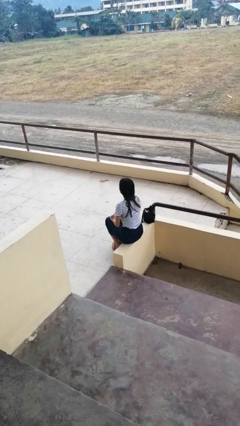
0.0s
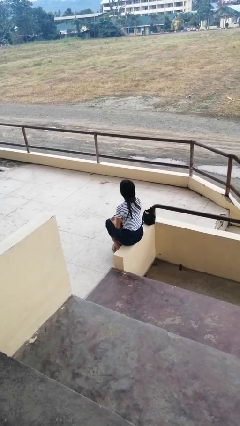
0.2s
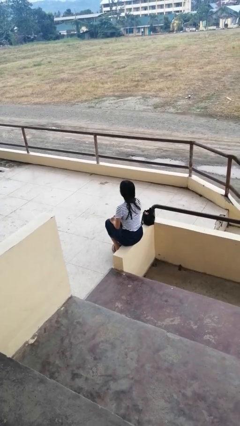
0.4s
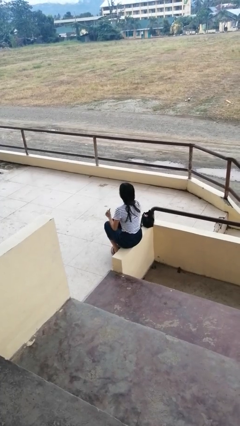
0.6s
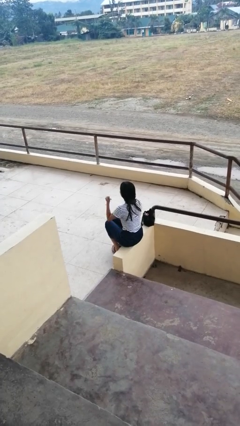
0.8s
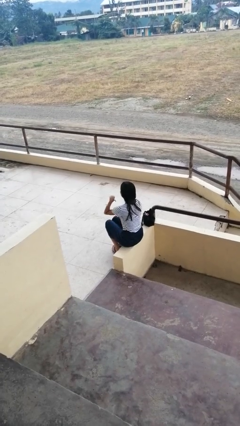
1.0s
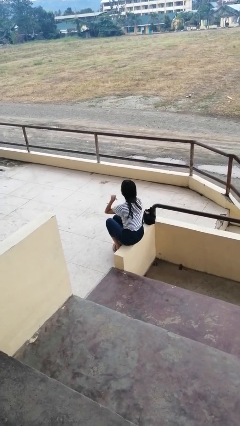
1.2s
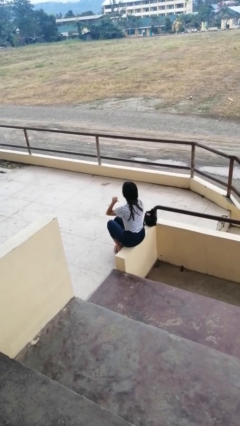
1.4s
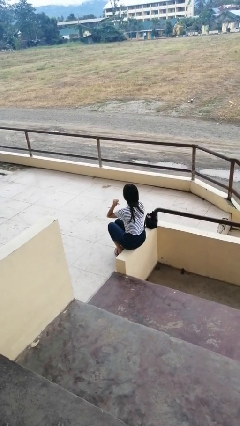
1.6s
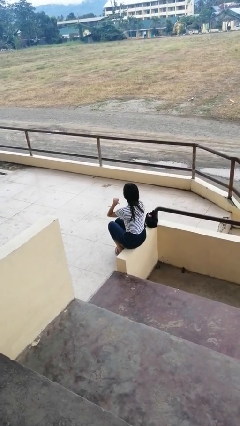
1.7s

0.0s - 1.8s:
person gestures behind me

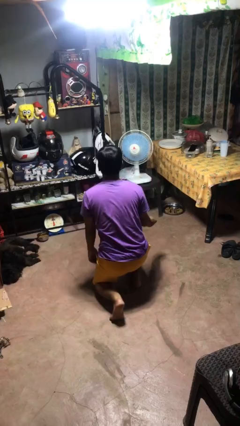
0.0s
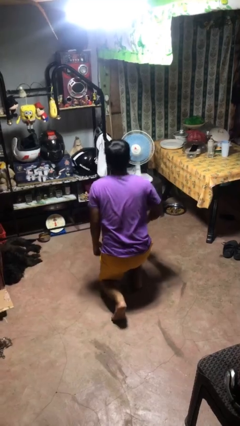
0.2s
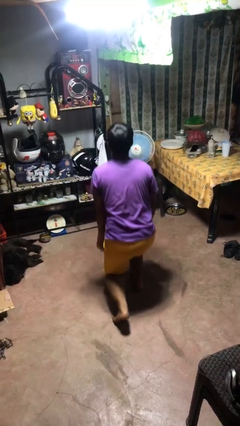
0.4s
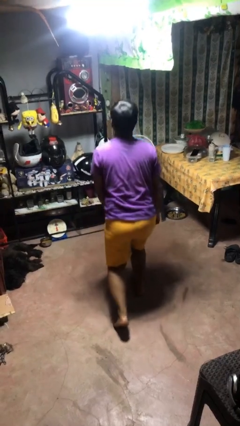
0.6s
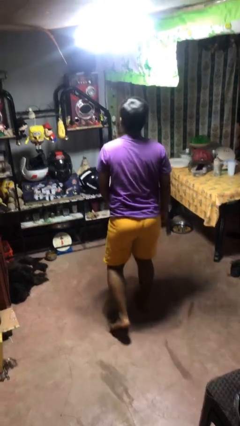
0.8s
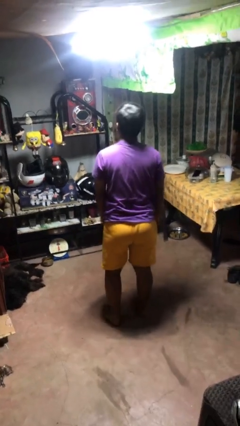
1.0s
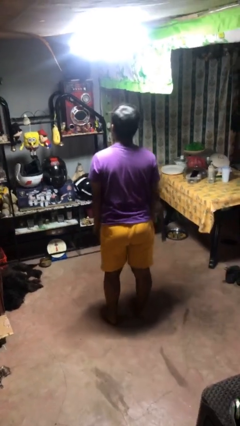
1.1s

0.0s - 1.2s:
person stands up from floor

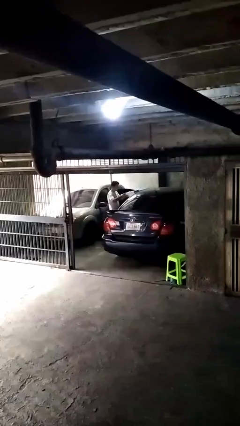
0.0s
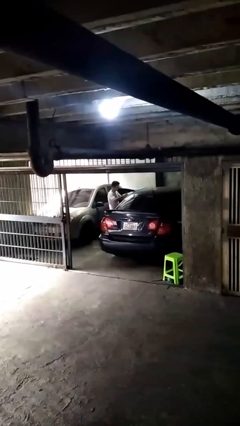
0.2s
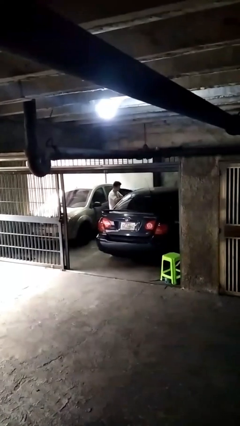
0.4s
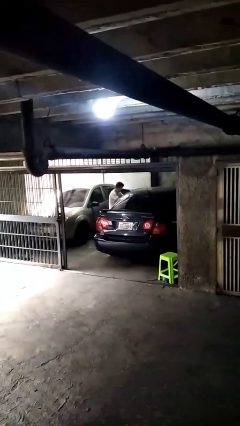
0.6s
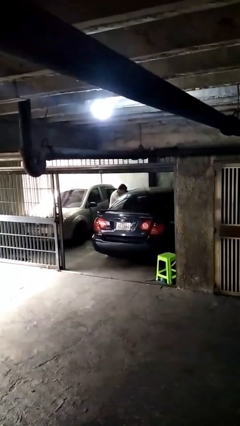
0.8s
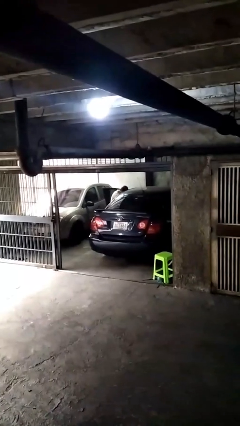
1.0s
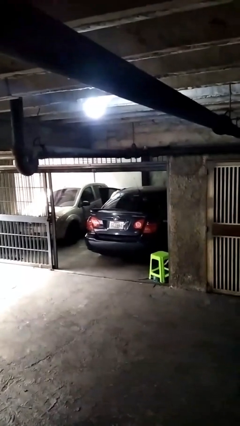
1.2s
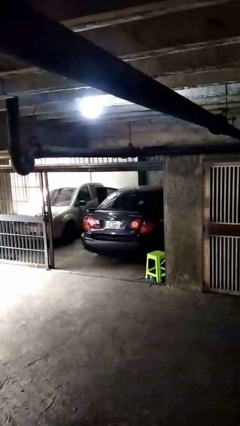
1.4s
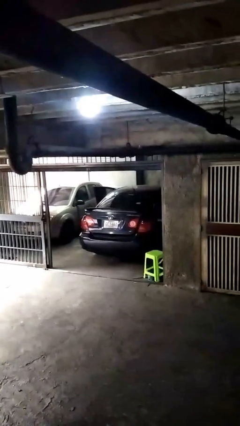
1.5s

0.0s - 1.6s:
person loads car

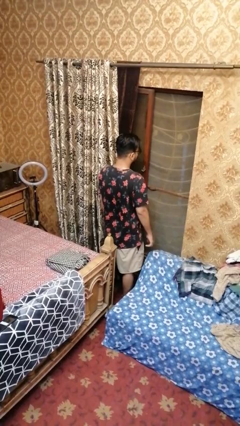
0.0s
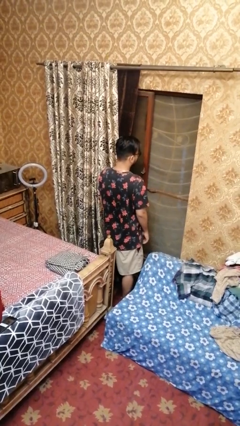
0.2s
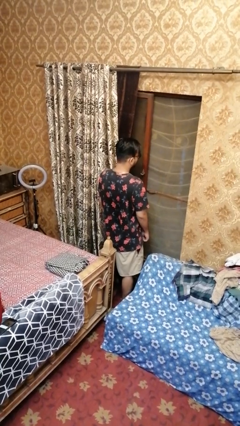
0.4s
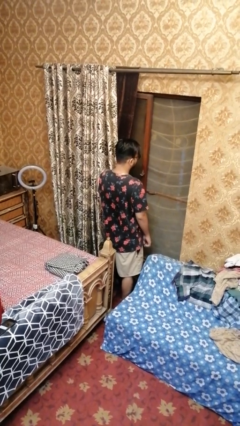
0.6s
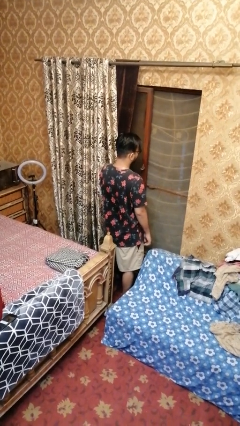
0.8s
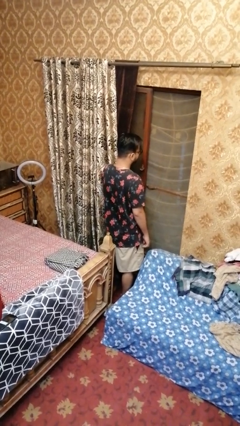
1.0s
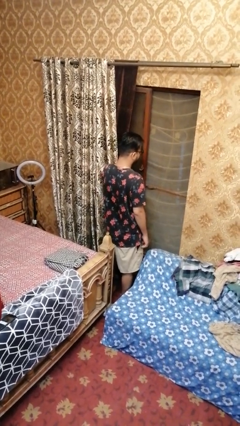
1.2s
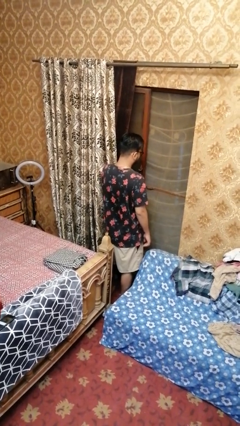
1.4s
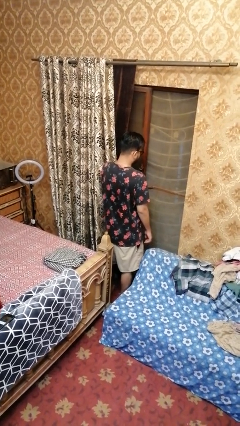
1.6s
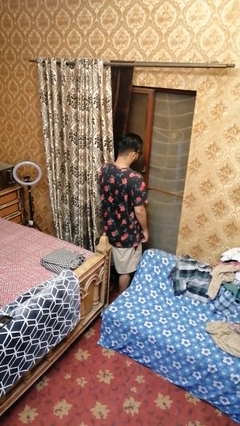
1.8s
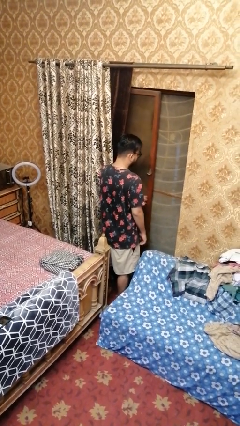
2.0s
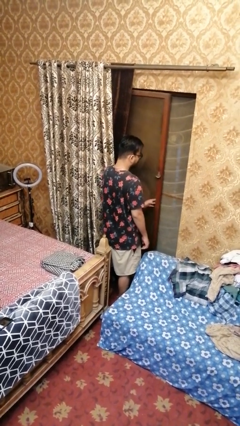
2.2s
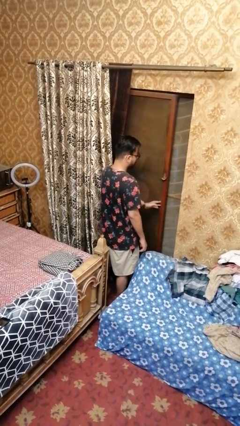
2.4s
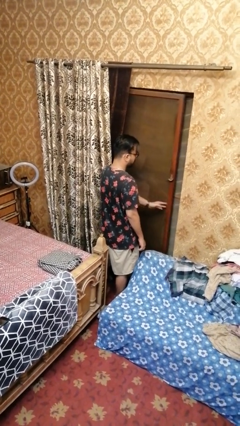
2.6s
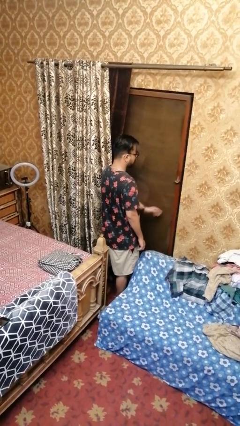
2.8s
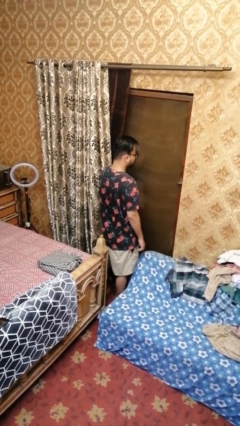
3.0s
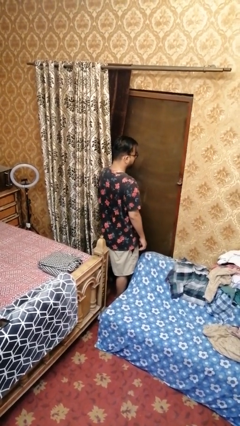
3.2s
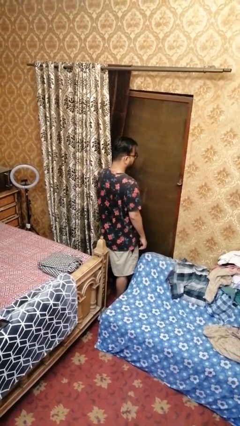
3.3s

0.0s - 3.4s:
person closes home window

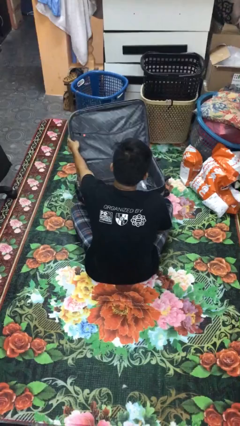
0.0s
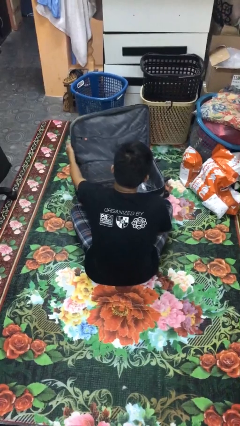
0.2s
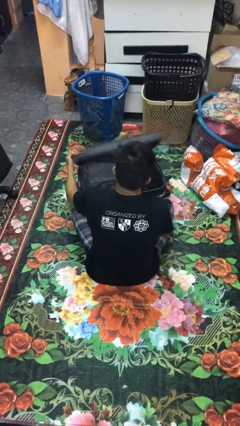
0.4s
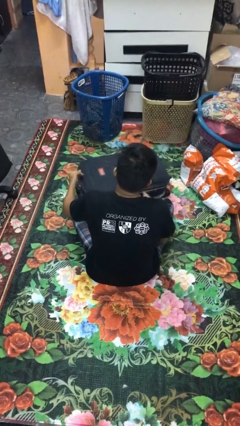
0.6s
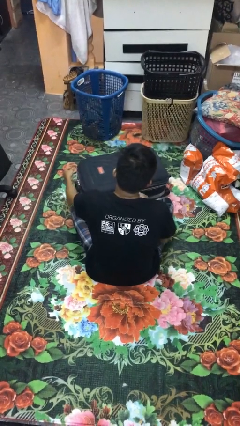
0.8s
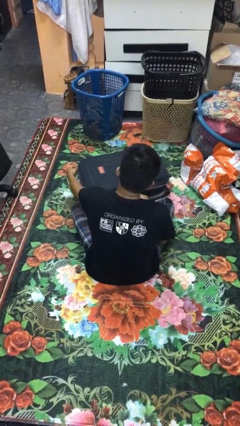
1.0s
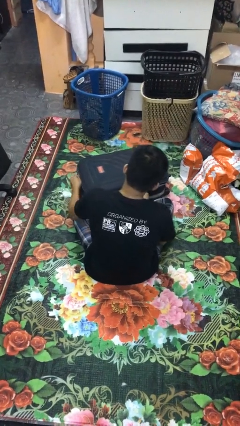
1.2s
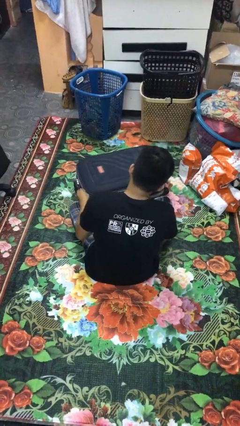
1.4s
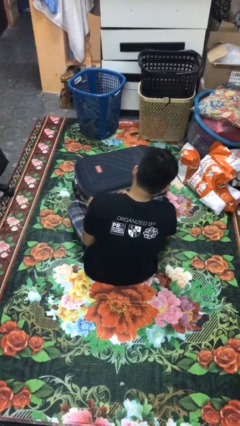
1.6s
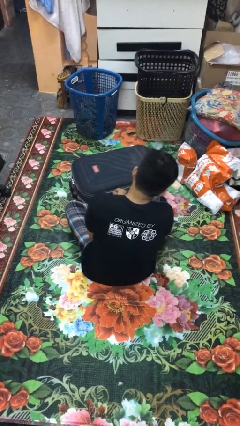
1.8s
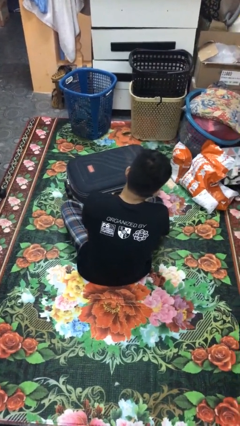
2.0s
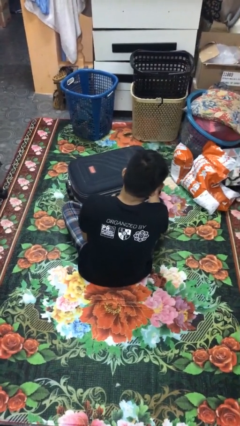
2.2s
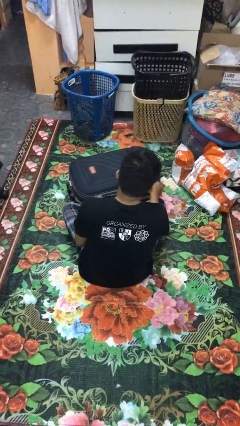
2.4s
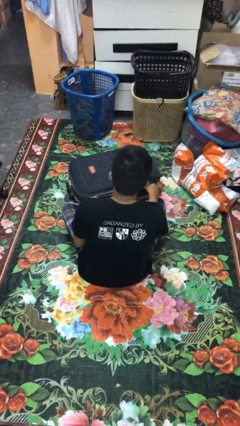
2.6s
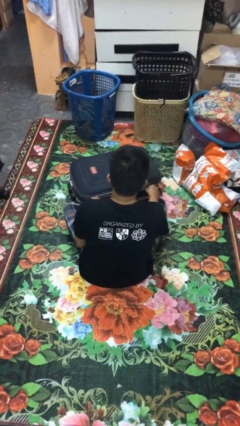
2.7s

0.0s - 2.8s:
person closes suitcase

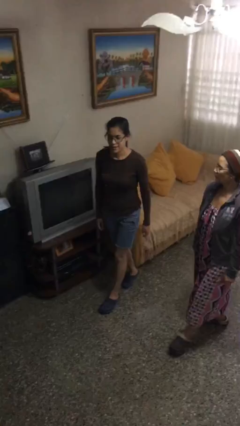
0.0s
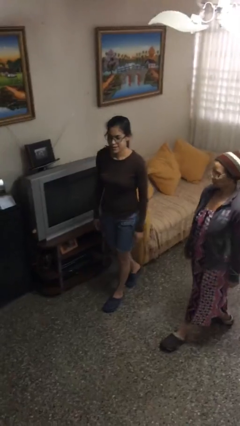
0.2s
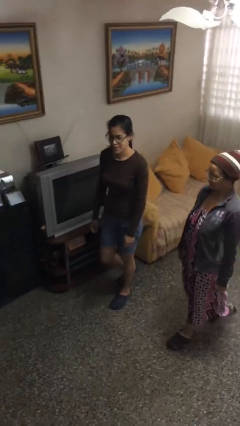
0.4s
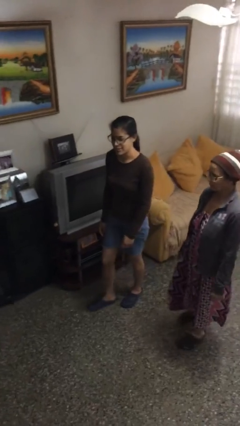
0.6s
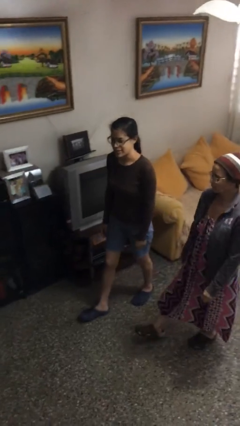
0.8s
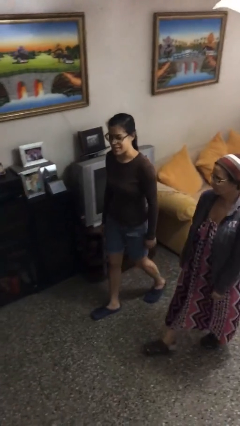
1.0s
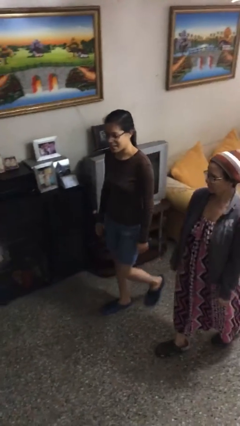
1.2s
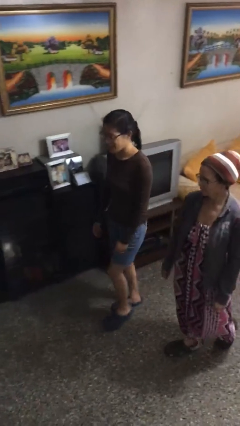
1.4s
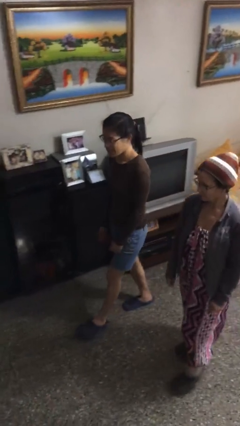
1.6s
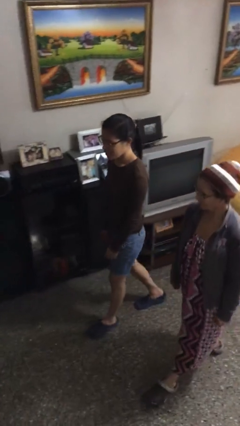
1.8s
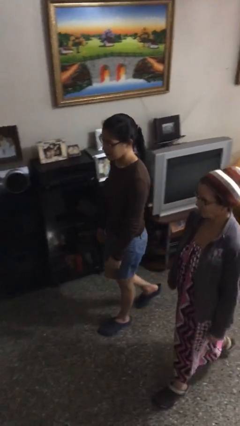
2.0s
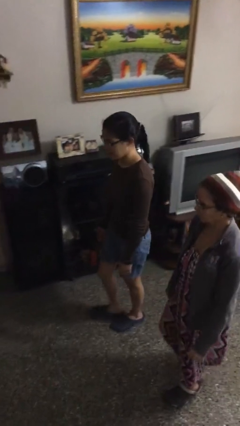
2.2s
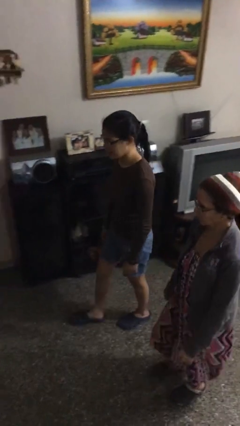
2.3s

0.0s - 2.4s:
person talks to person

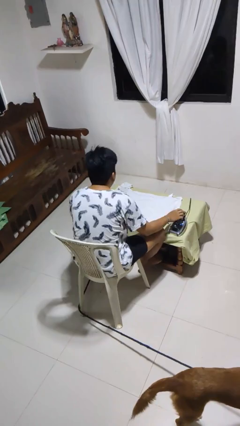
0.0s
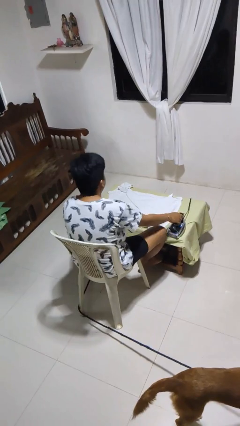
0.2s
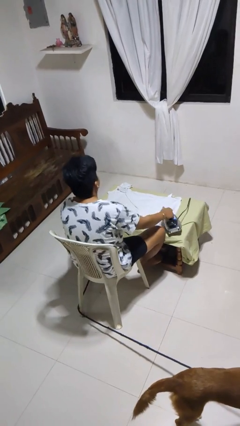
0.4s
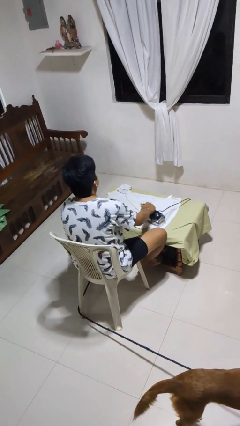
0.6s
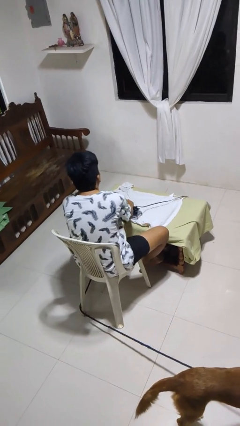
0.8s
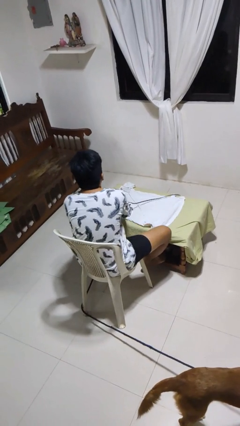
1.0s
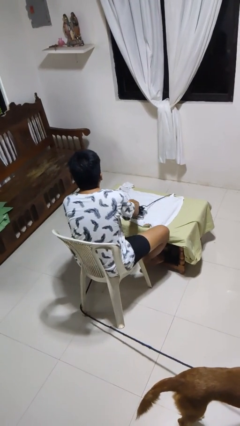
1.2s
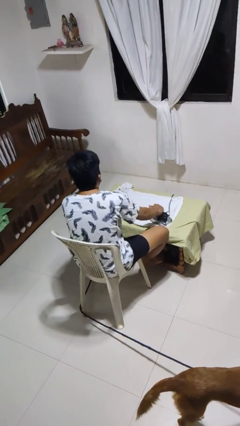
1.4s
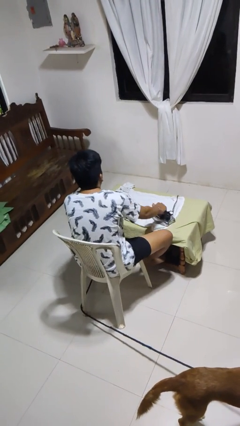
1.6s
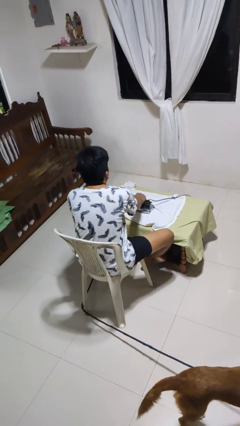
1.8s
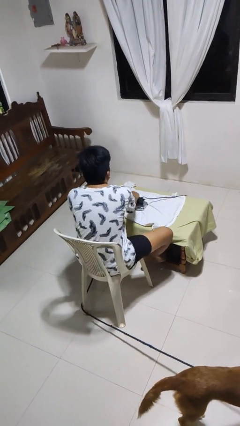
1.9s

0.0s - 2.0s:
person irons clothes

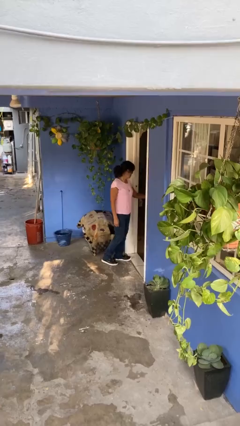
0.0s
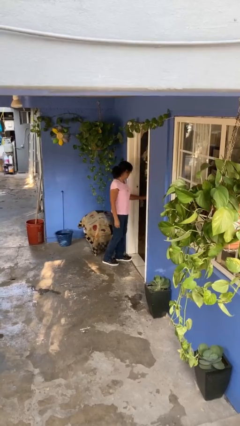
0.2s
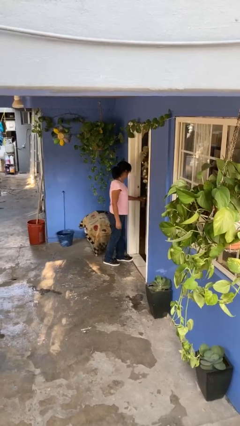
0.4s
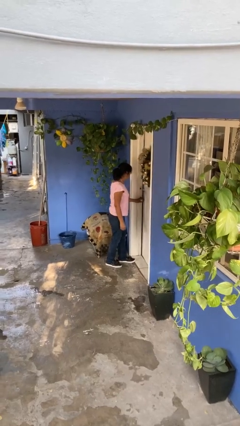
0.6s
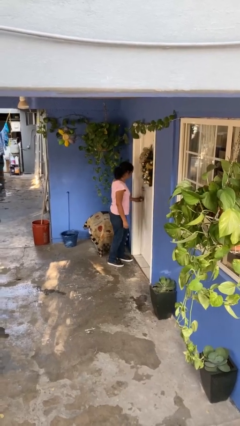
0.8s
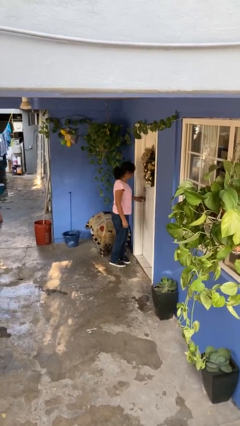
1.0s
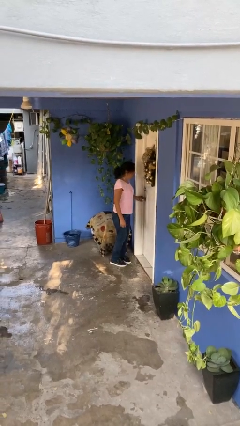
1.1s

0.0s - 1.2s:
person closes facility door

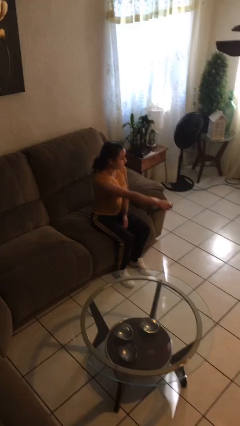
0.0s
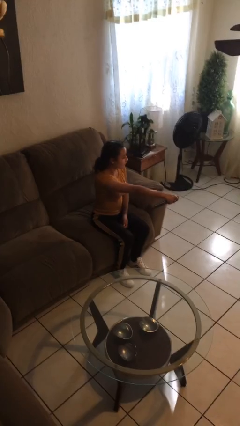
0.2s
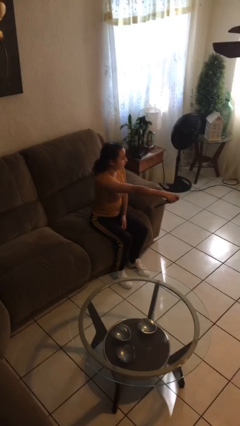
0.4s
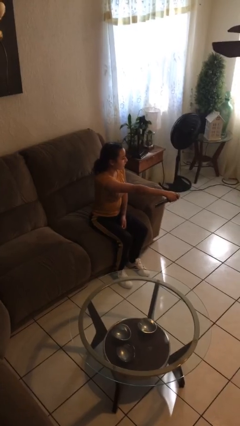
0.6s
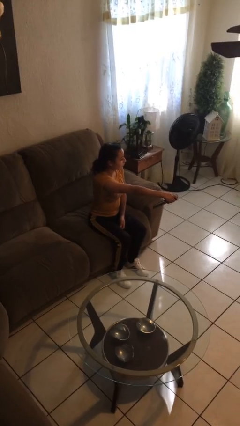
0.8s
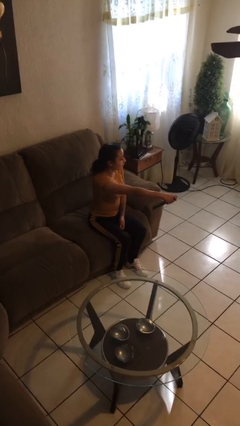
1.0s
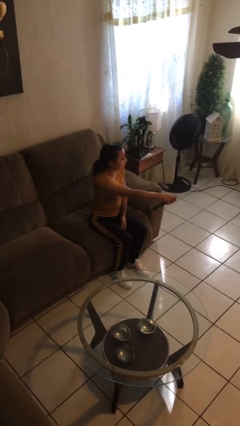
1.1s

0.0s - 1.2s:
person uses television remote
